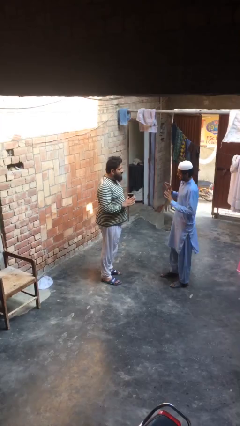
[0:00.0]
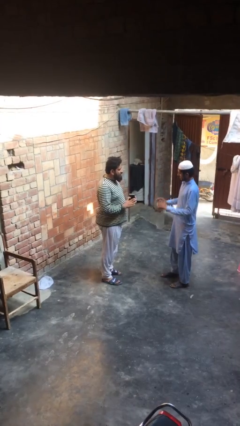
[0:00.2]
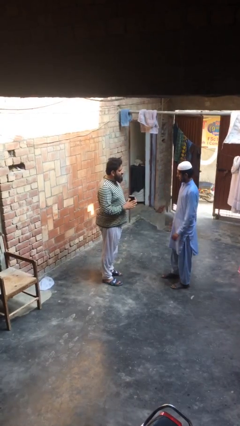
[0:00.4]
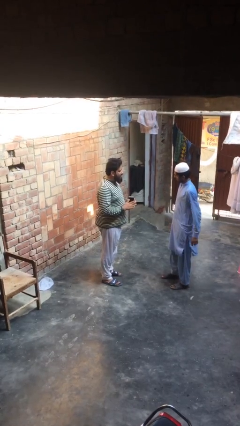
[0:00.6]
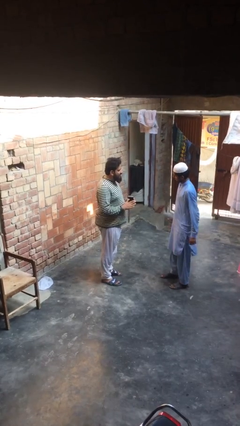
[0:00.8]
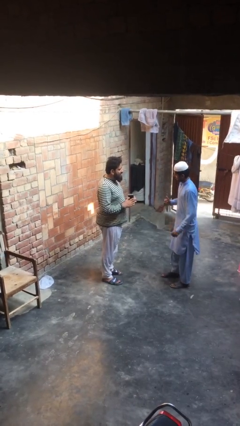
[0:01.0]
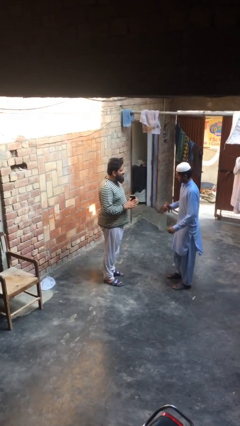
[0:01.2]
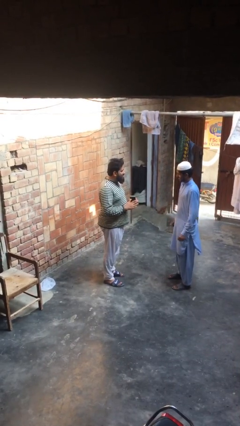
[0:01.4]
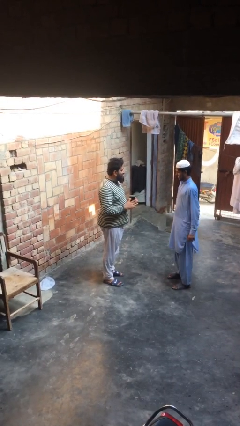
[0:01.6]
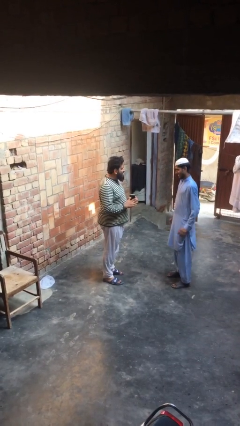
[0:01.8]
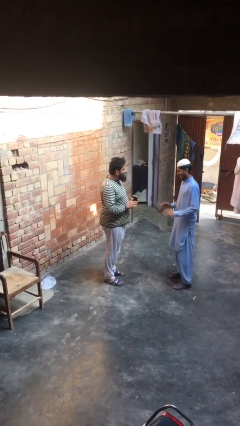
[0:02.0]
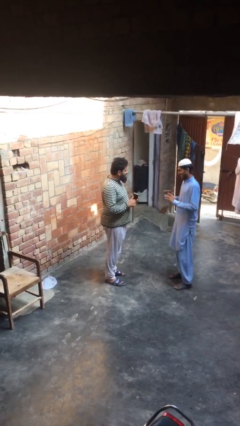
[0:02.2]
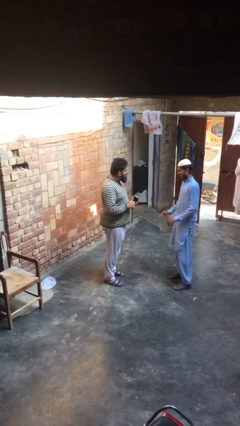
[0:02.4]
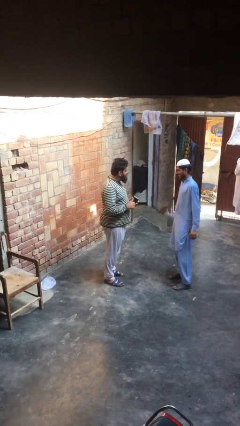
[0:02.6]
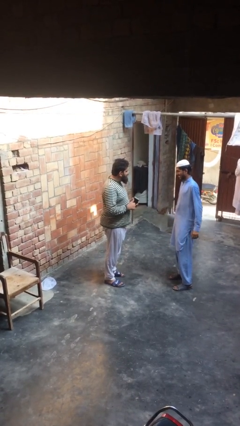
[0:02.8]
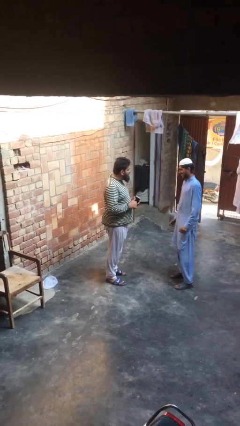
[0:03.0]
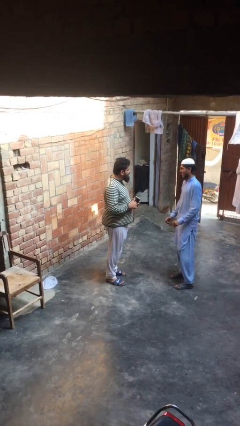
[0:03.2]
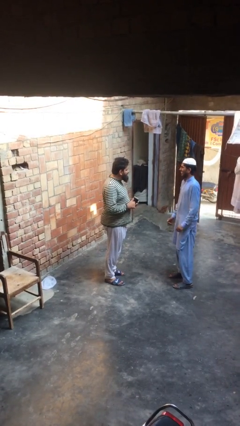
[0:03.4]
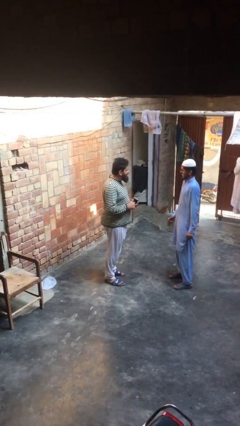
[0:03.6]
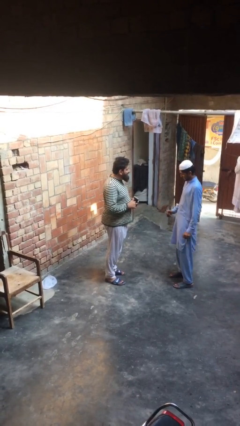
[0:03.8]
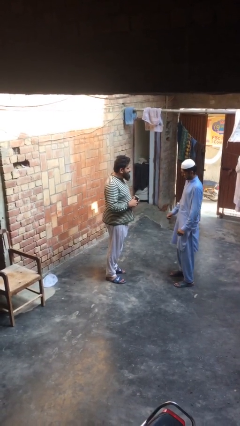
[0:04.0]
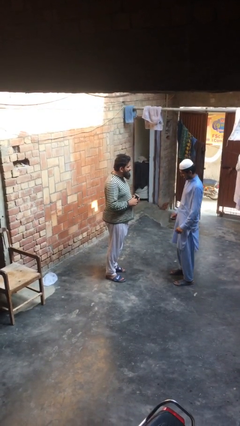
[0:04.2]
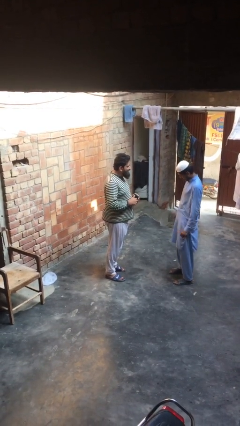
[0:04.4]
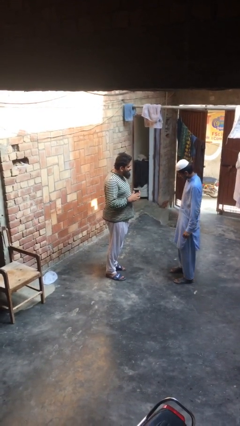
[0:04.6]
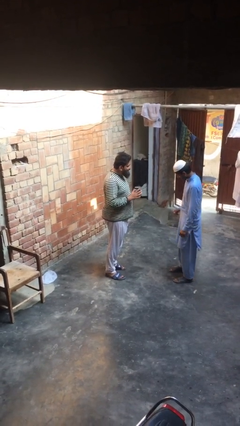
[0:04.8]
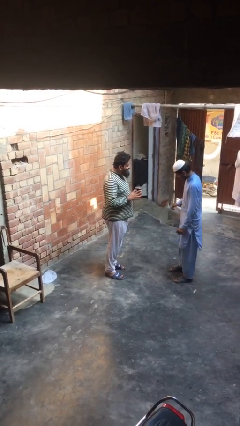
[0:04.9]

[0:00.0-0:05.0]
person talks to person

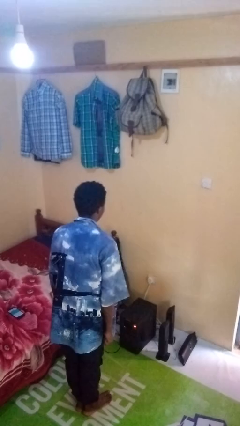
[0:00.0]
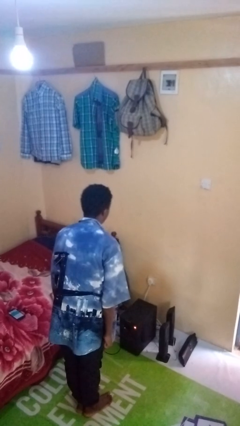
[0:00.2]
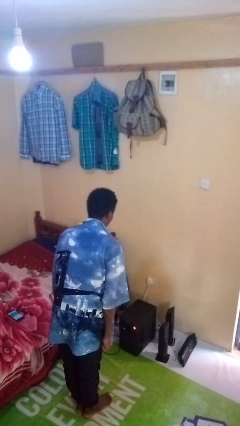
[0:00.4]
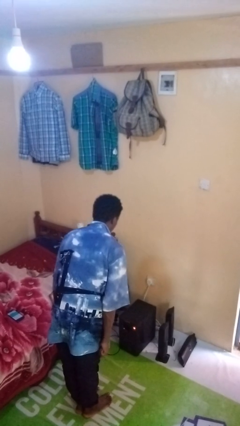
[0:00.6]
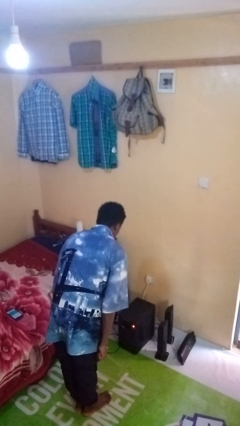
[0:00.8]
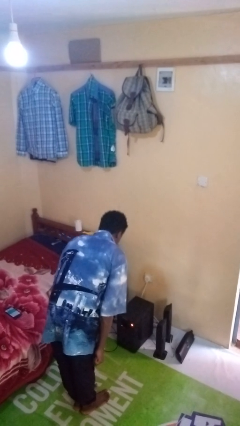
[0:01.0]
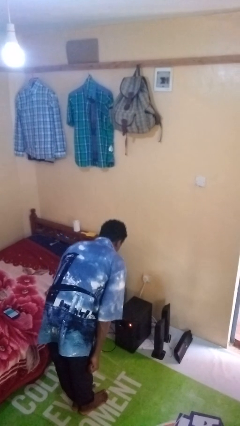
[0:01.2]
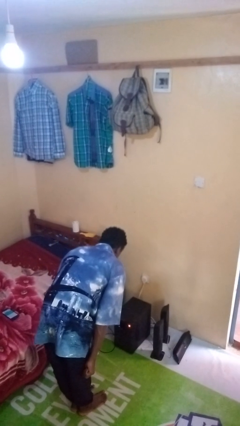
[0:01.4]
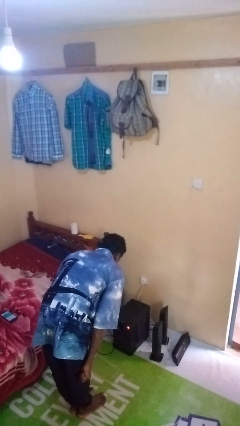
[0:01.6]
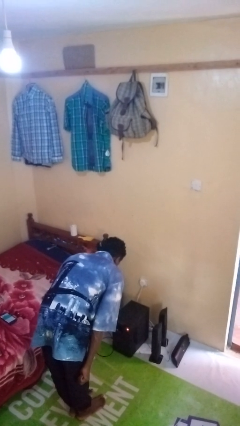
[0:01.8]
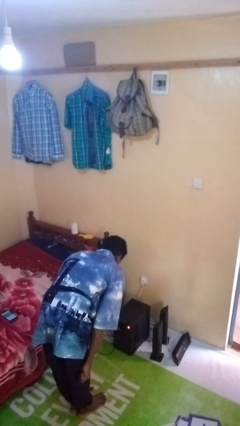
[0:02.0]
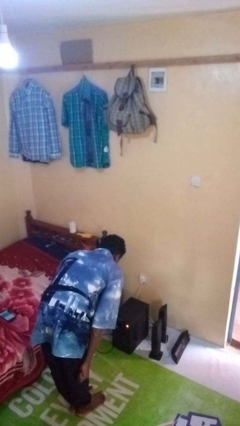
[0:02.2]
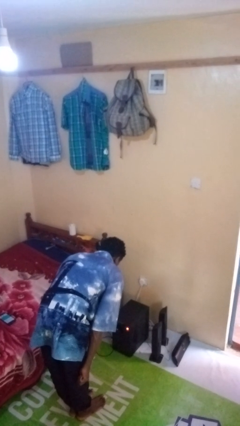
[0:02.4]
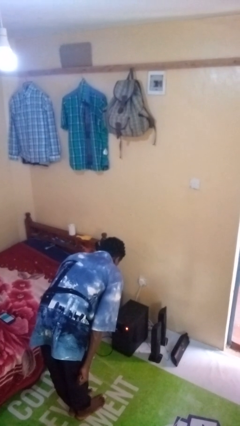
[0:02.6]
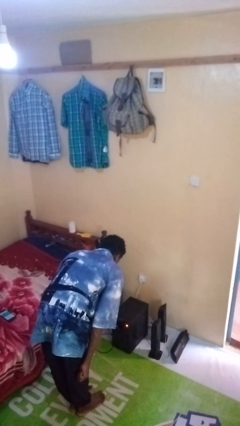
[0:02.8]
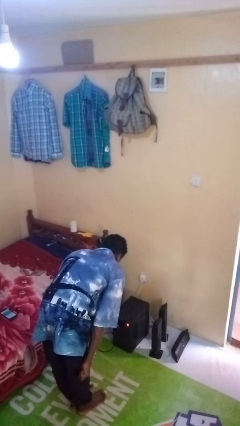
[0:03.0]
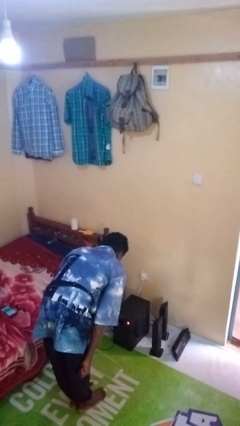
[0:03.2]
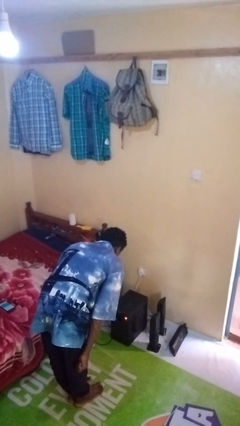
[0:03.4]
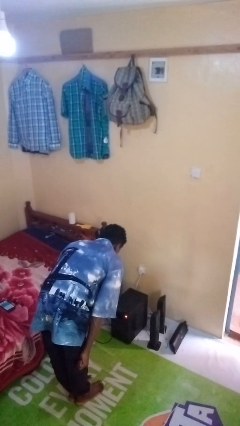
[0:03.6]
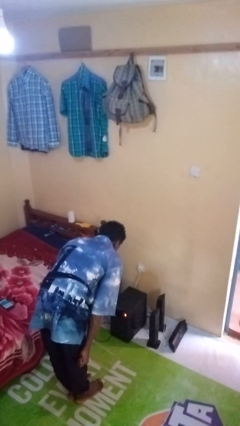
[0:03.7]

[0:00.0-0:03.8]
person bows

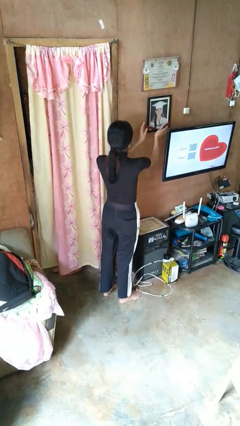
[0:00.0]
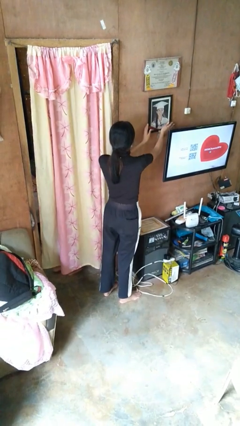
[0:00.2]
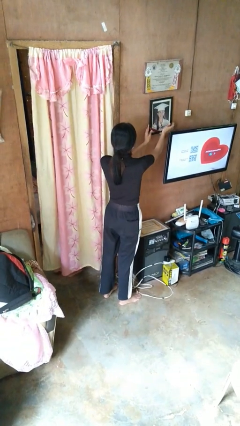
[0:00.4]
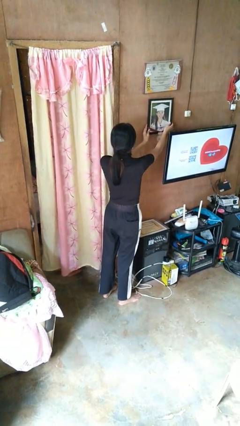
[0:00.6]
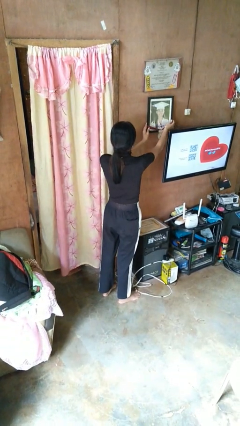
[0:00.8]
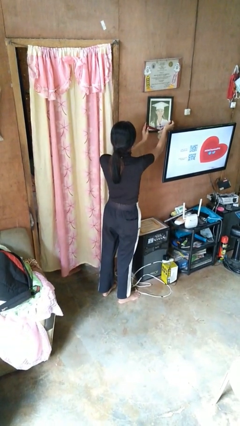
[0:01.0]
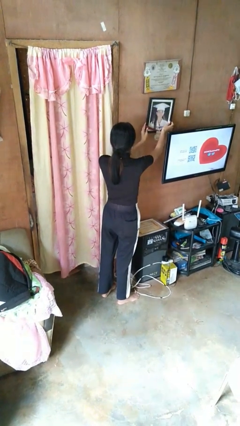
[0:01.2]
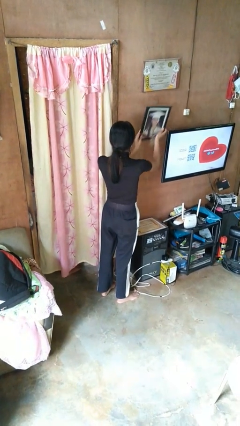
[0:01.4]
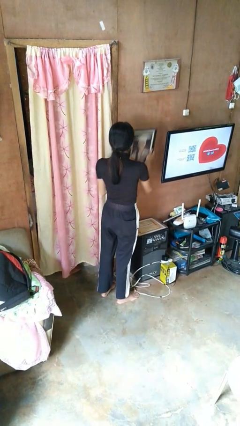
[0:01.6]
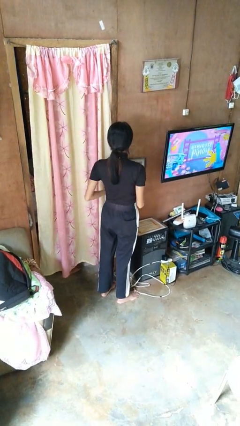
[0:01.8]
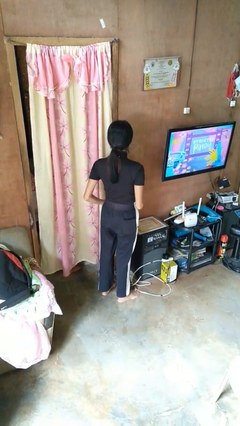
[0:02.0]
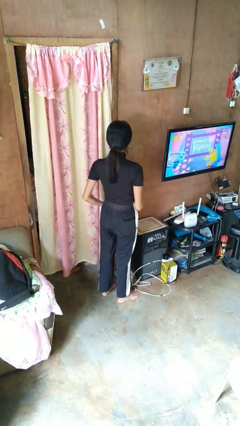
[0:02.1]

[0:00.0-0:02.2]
person takes down picture frame

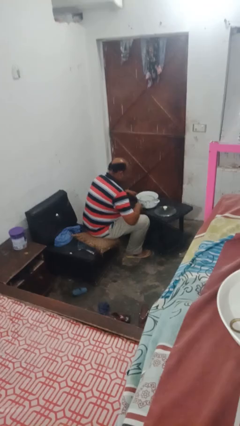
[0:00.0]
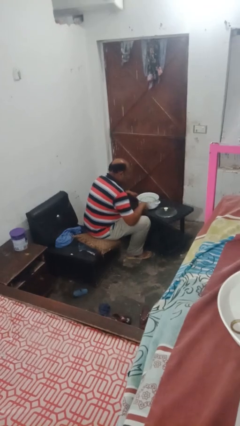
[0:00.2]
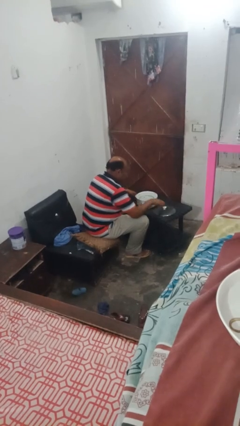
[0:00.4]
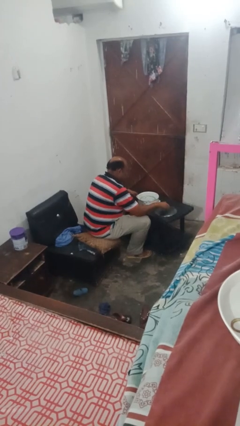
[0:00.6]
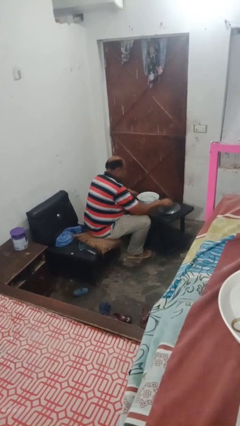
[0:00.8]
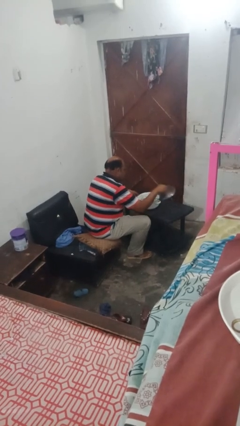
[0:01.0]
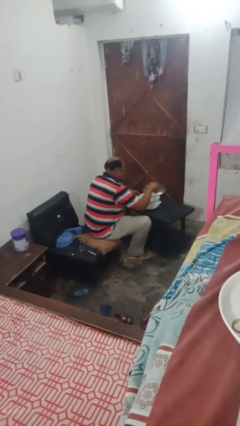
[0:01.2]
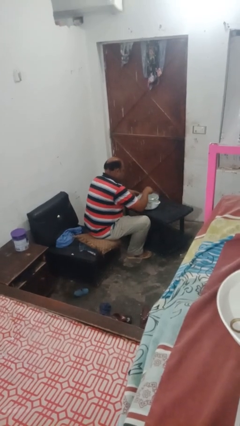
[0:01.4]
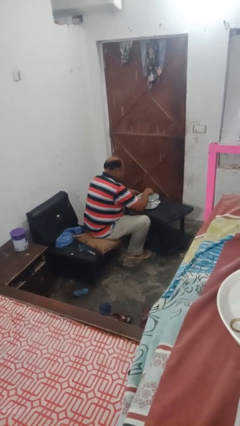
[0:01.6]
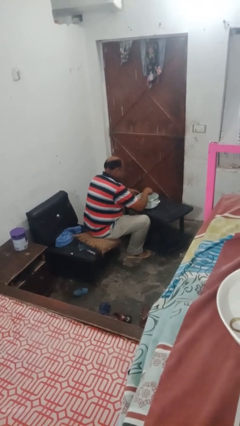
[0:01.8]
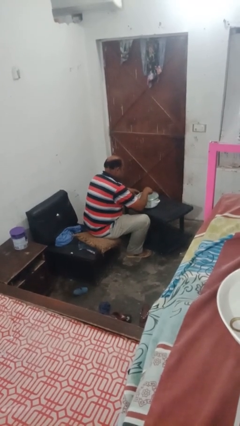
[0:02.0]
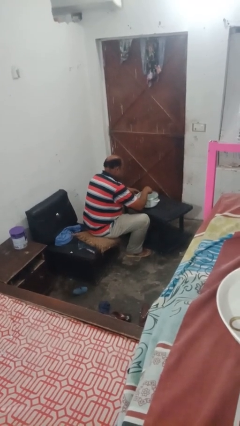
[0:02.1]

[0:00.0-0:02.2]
person closes jar

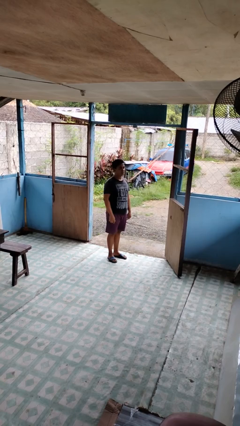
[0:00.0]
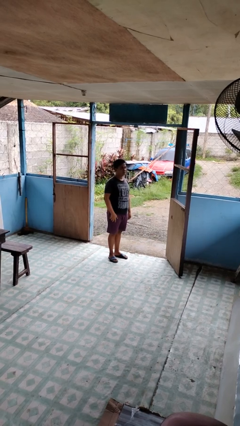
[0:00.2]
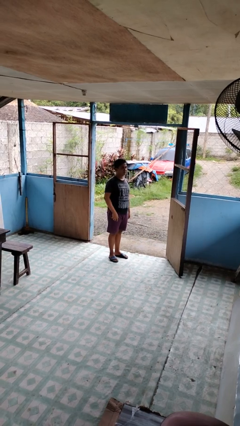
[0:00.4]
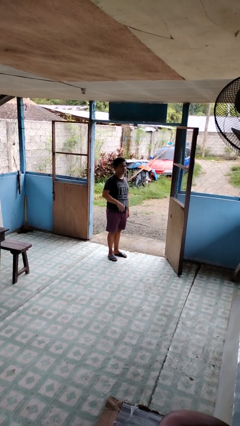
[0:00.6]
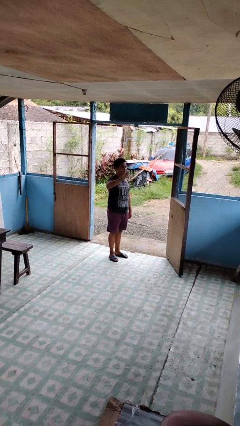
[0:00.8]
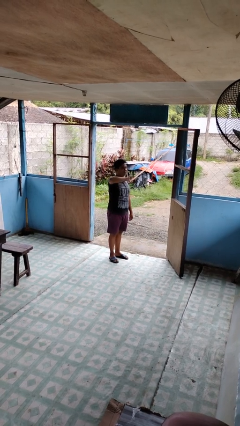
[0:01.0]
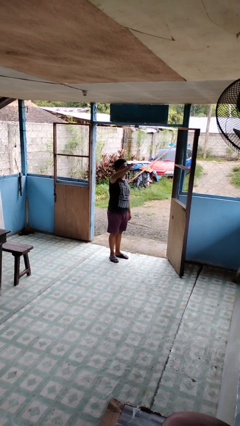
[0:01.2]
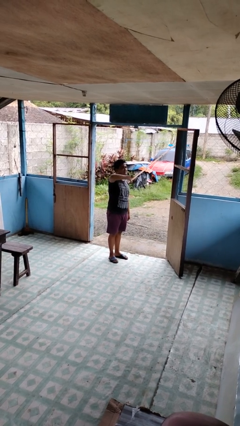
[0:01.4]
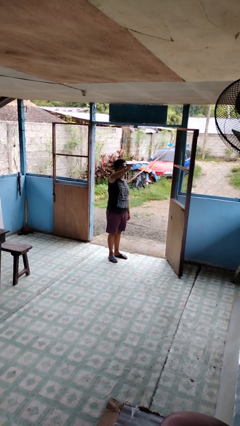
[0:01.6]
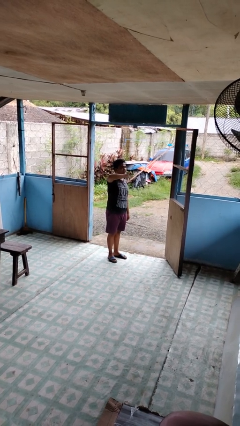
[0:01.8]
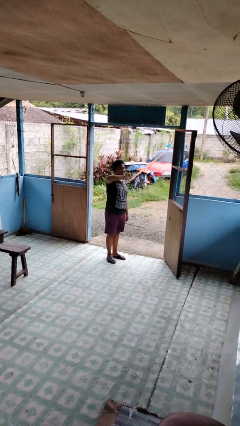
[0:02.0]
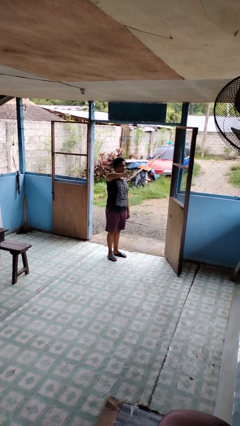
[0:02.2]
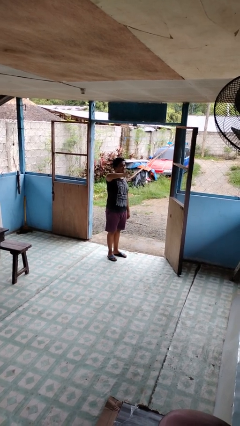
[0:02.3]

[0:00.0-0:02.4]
person gestures thumbs down

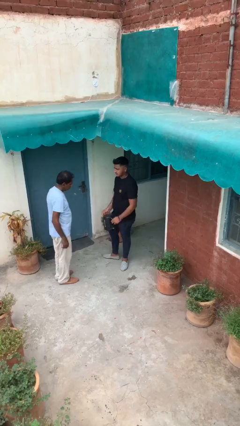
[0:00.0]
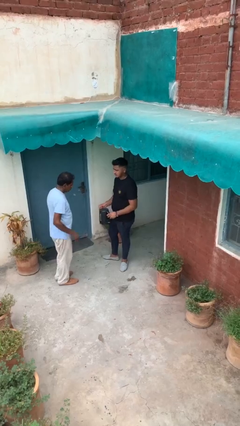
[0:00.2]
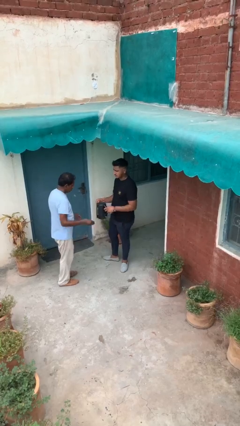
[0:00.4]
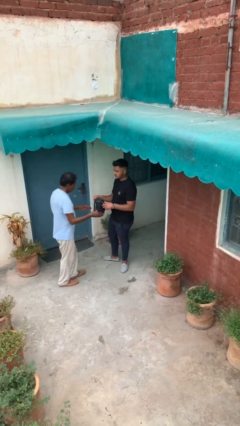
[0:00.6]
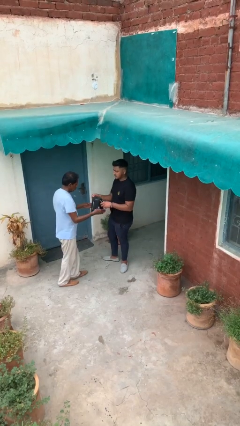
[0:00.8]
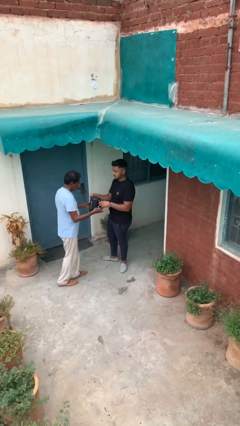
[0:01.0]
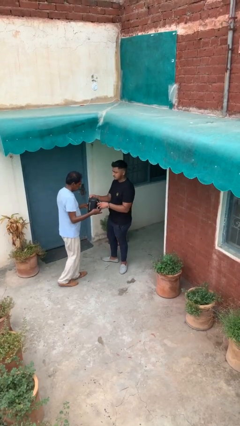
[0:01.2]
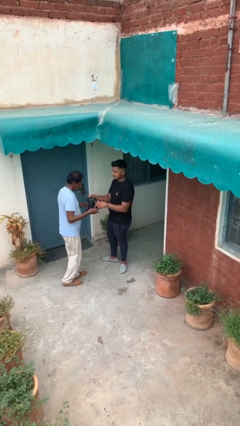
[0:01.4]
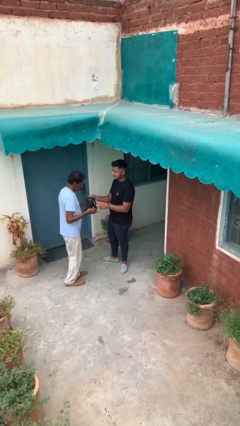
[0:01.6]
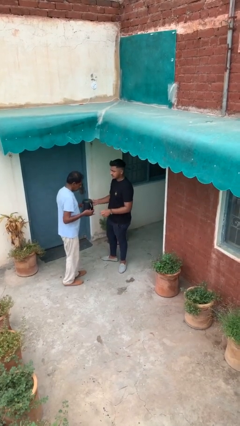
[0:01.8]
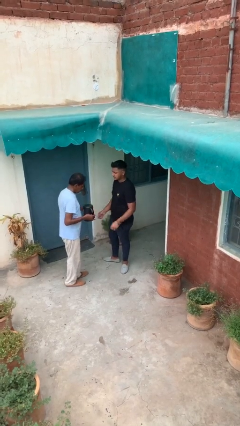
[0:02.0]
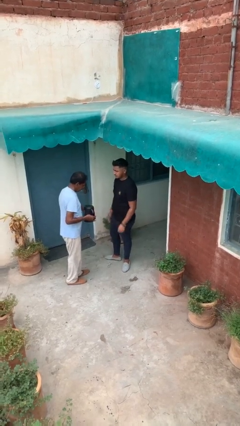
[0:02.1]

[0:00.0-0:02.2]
person transfers object to person
